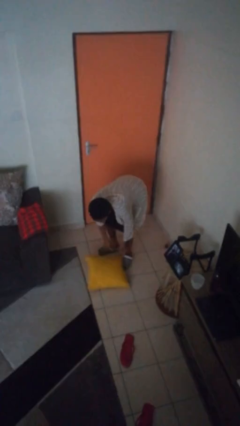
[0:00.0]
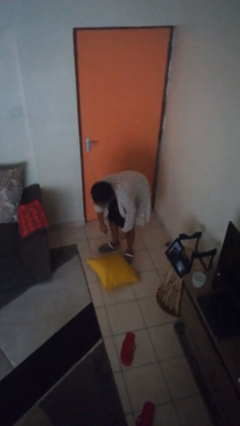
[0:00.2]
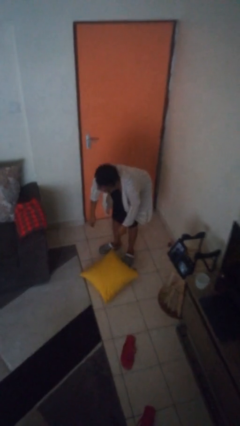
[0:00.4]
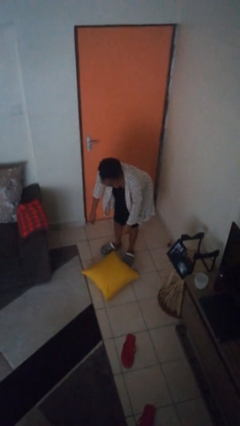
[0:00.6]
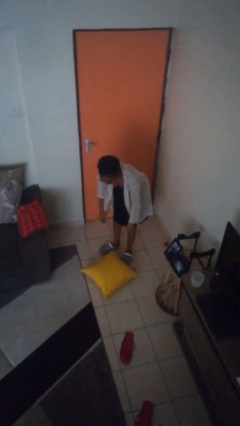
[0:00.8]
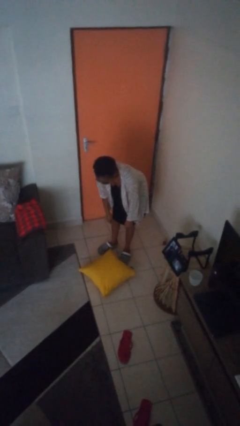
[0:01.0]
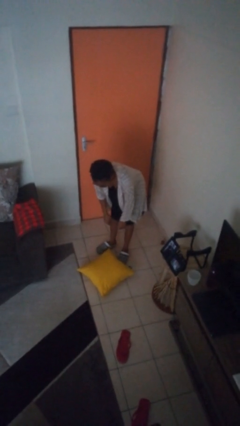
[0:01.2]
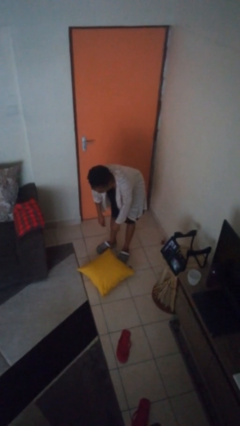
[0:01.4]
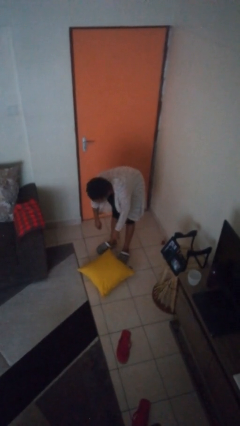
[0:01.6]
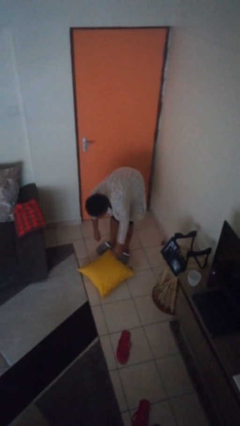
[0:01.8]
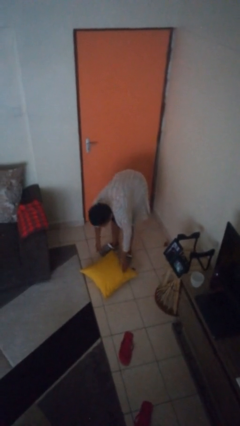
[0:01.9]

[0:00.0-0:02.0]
person catches dropped object

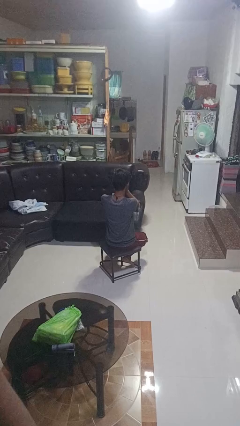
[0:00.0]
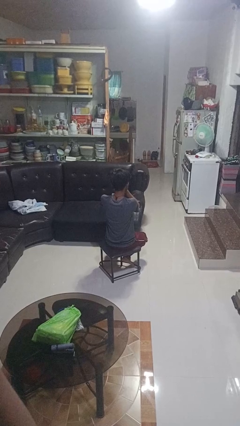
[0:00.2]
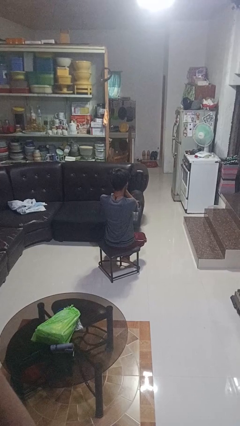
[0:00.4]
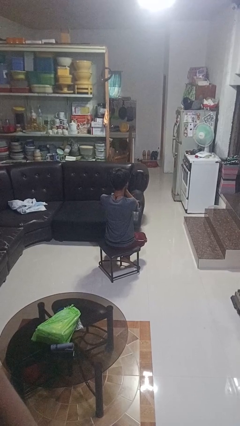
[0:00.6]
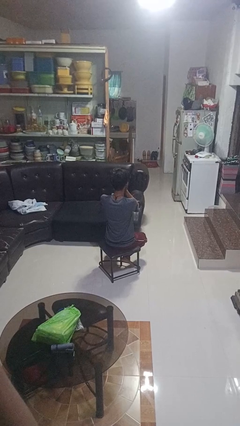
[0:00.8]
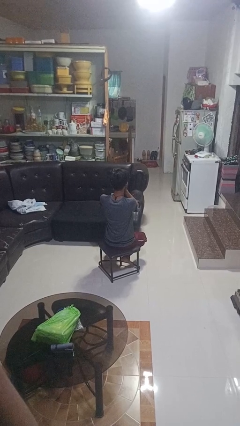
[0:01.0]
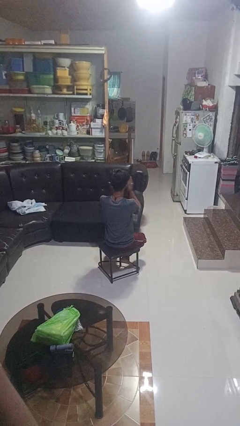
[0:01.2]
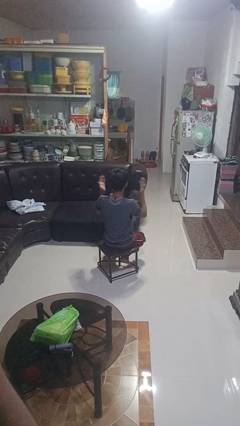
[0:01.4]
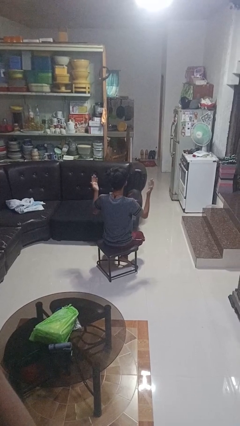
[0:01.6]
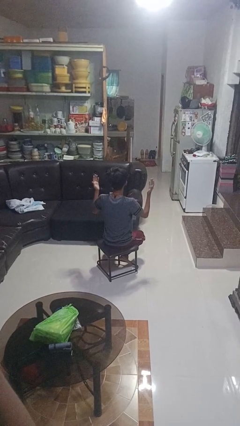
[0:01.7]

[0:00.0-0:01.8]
person covers face with hands

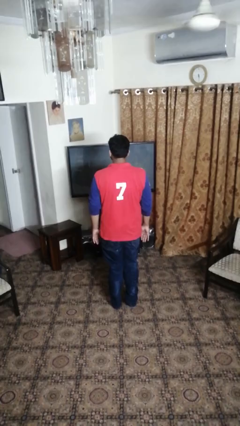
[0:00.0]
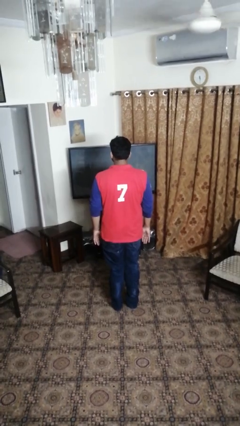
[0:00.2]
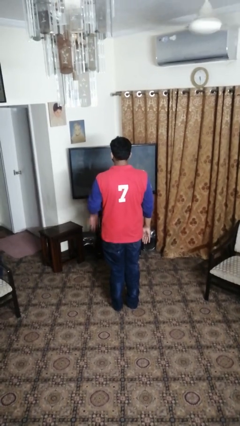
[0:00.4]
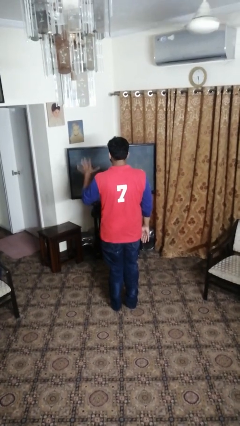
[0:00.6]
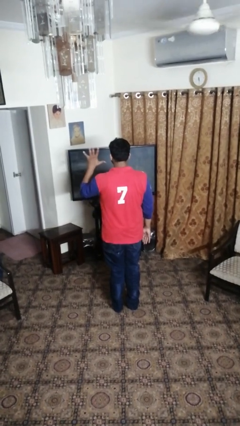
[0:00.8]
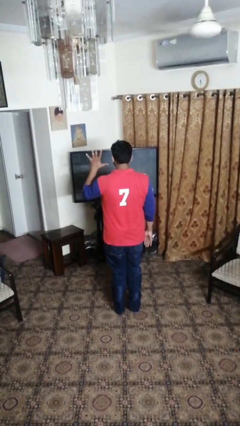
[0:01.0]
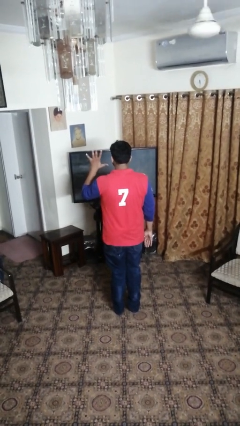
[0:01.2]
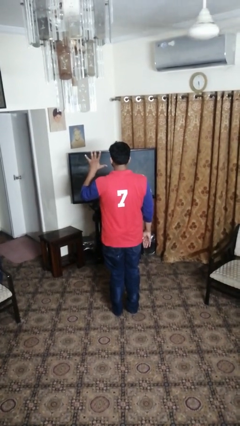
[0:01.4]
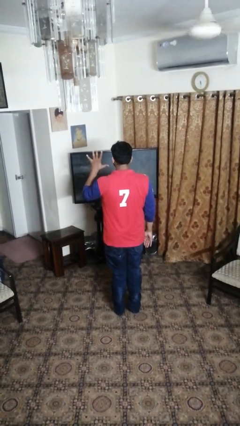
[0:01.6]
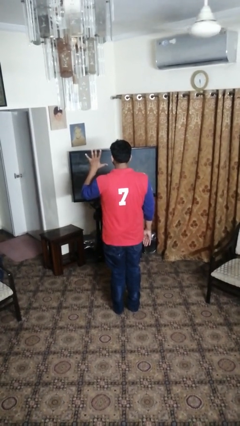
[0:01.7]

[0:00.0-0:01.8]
person gestures number five

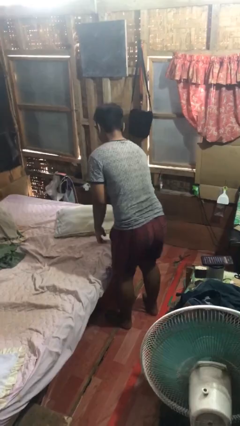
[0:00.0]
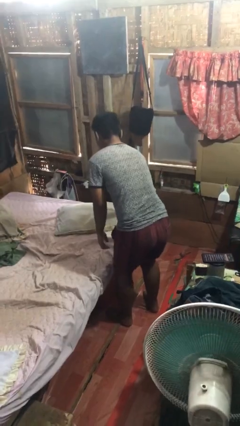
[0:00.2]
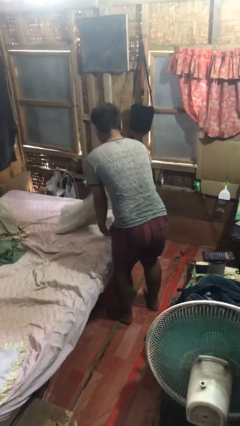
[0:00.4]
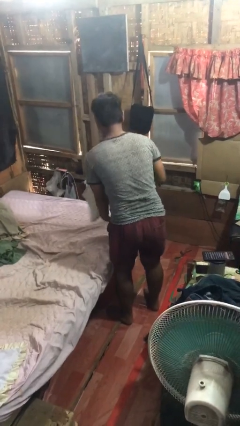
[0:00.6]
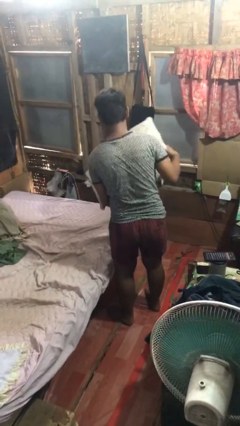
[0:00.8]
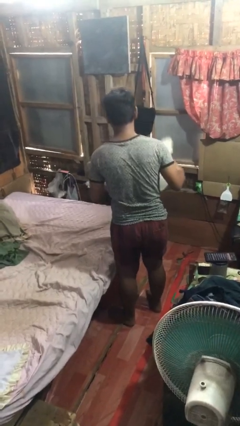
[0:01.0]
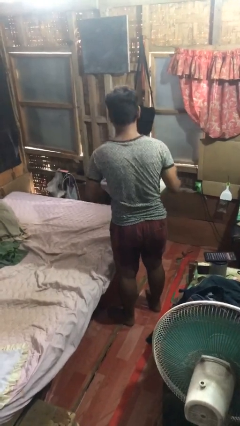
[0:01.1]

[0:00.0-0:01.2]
person picks up object from bed

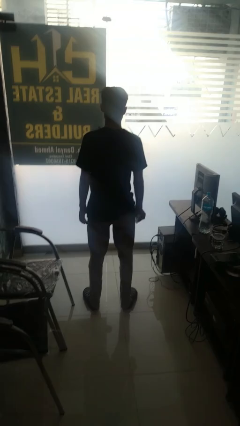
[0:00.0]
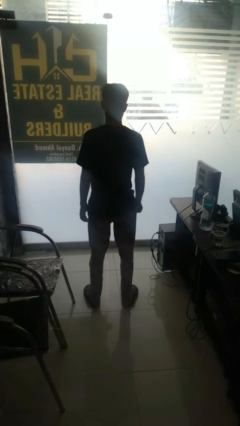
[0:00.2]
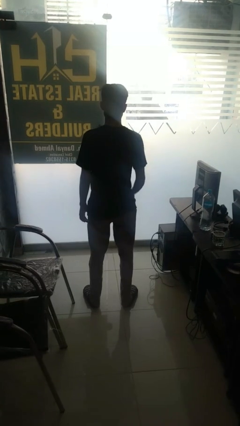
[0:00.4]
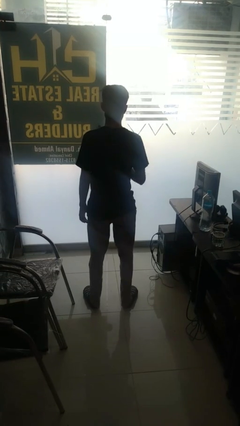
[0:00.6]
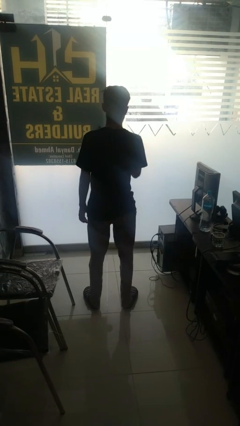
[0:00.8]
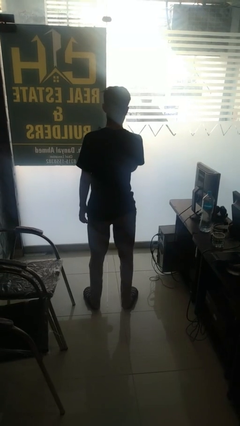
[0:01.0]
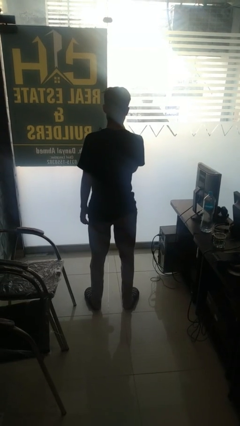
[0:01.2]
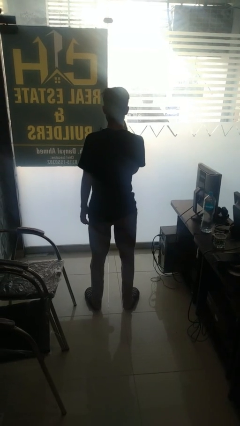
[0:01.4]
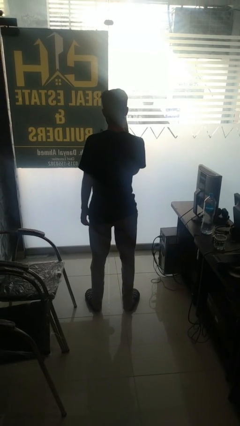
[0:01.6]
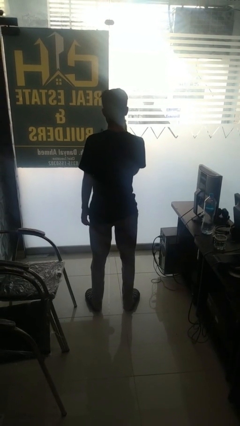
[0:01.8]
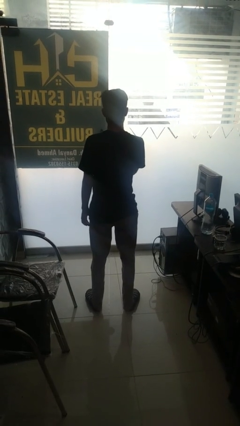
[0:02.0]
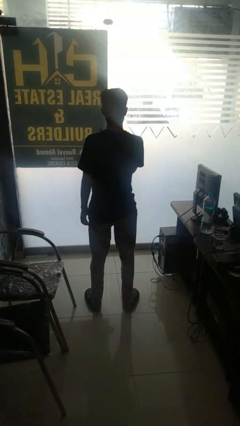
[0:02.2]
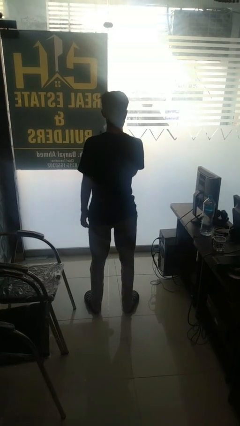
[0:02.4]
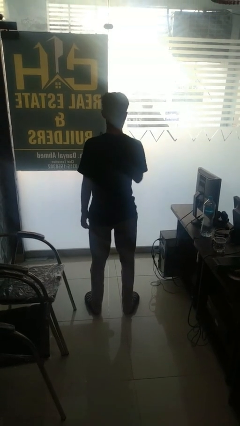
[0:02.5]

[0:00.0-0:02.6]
person wipes mouth with napkin

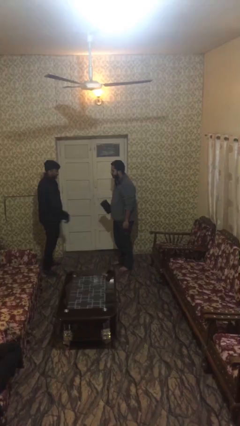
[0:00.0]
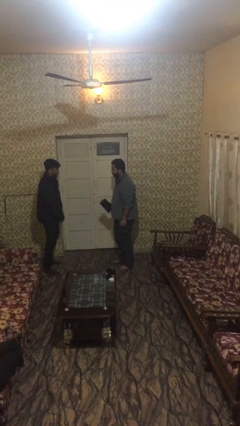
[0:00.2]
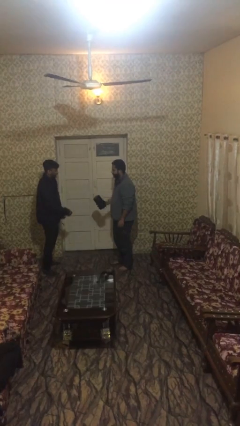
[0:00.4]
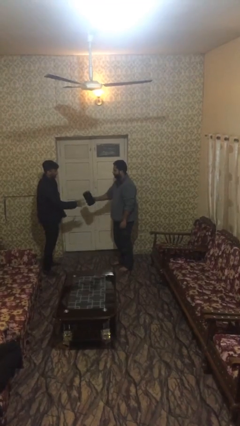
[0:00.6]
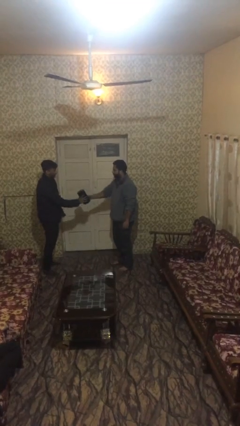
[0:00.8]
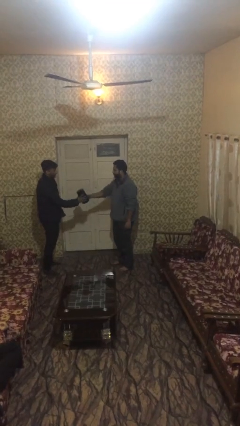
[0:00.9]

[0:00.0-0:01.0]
person transfers object to person

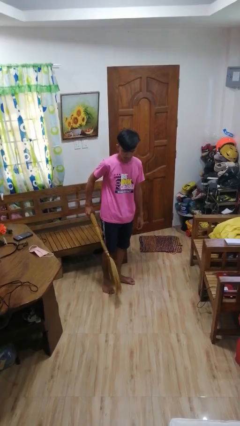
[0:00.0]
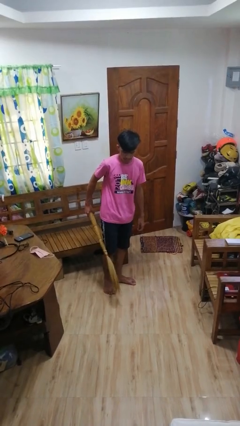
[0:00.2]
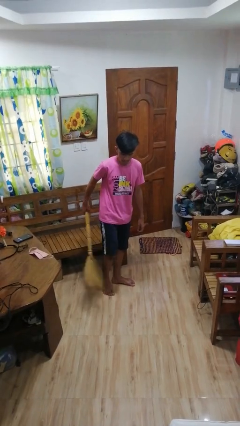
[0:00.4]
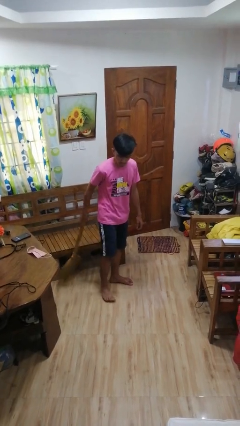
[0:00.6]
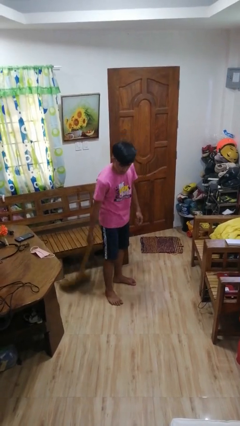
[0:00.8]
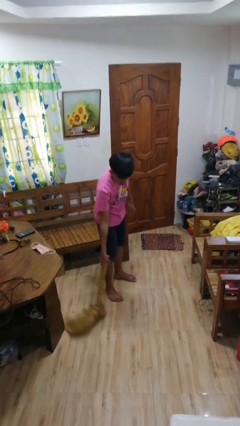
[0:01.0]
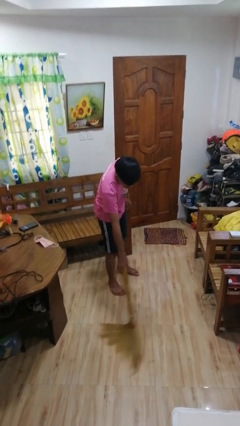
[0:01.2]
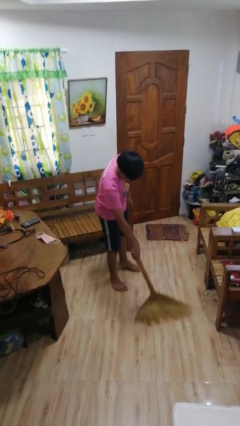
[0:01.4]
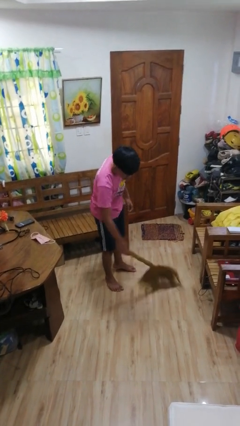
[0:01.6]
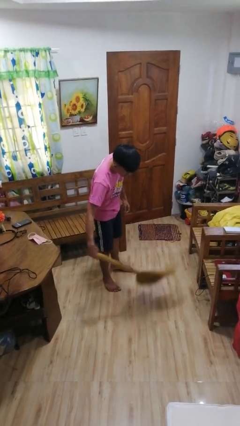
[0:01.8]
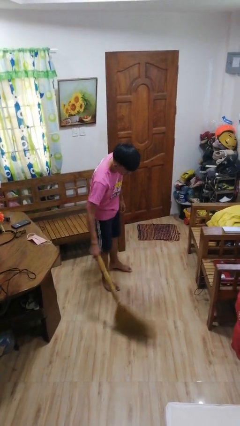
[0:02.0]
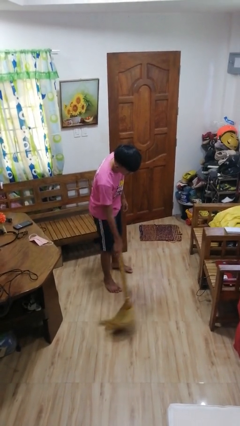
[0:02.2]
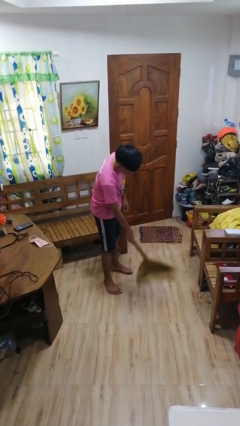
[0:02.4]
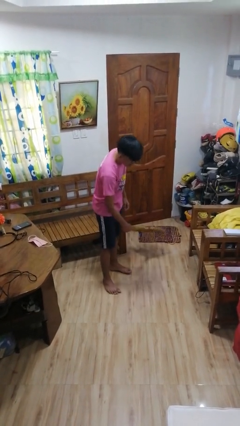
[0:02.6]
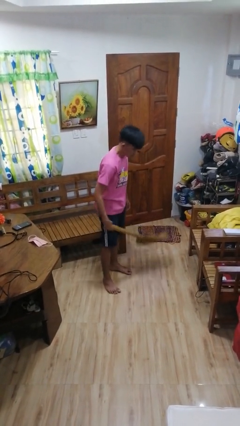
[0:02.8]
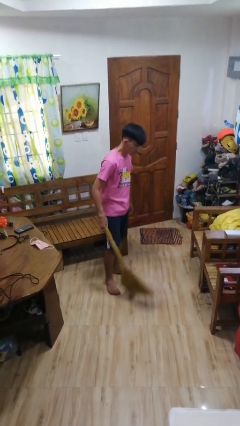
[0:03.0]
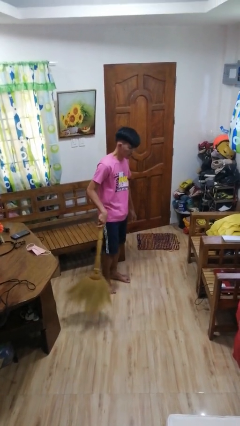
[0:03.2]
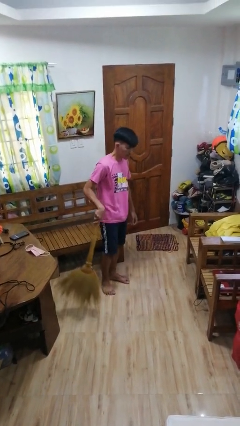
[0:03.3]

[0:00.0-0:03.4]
person sweeps floor

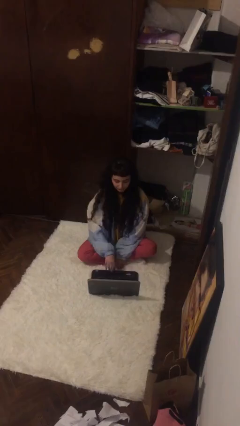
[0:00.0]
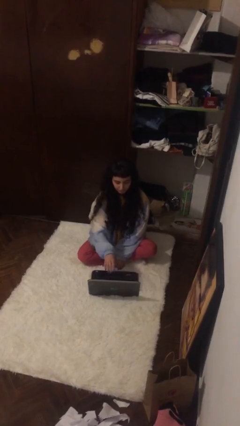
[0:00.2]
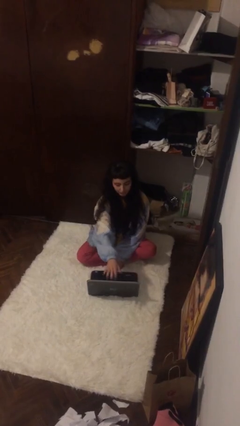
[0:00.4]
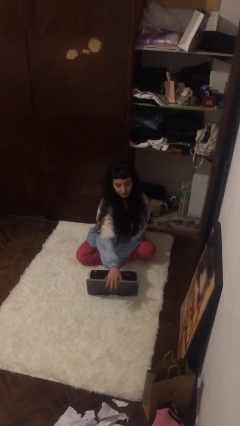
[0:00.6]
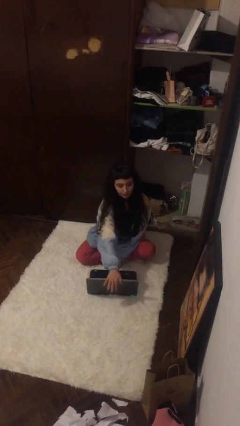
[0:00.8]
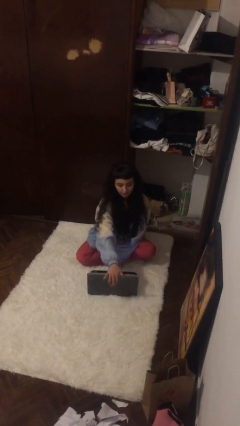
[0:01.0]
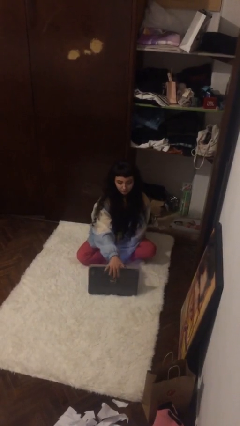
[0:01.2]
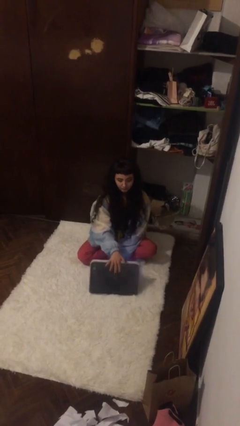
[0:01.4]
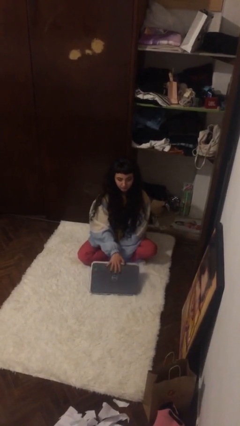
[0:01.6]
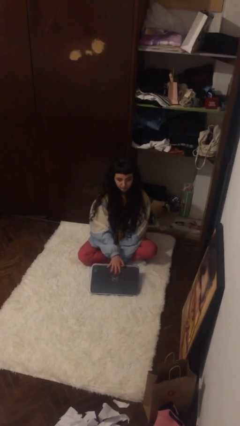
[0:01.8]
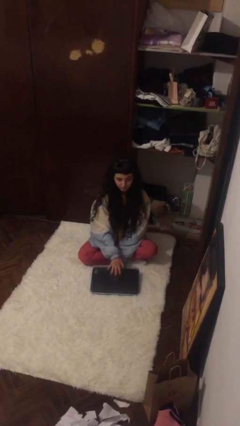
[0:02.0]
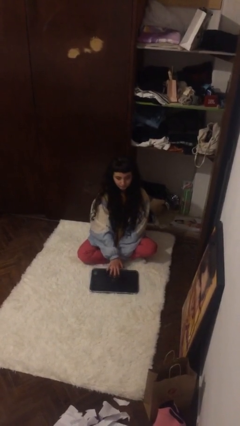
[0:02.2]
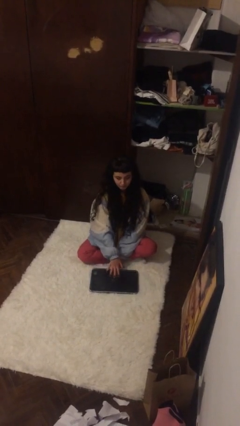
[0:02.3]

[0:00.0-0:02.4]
person closes laptop

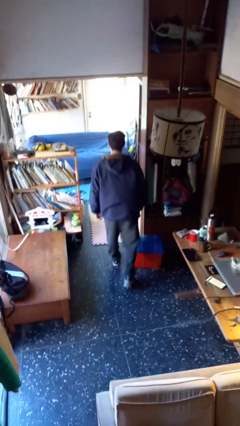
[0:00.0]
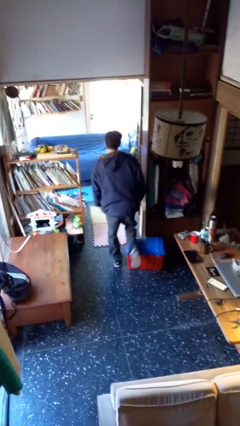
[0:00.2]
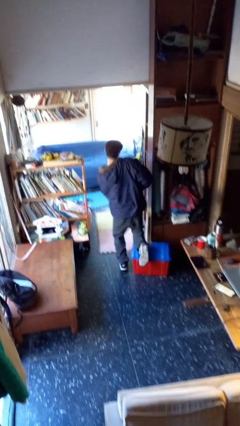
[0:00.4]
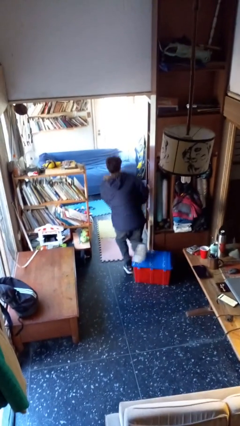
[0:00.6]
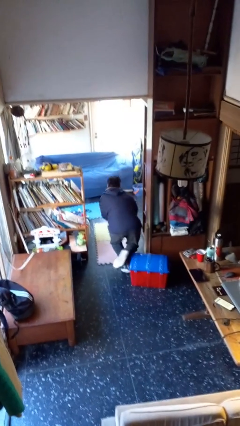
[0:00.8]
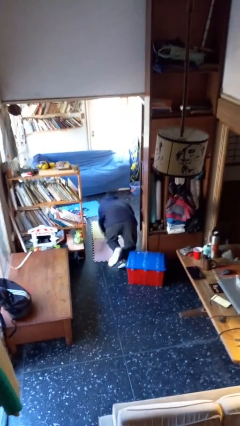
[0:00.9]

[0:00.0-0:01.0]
person trips on object on floor
